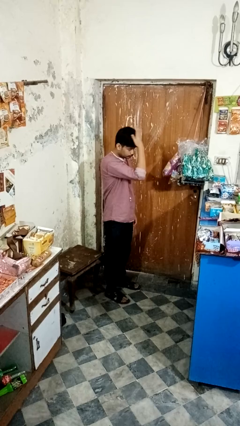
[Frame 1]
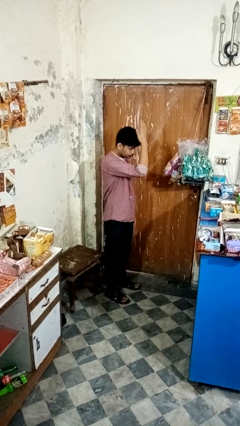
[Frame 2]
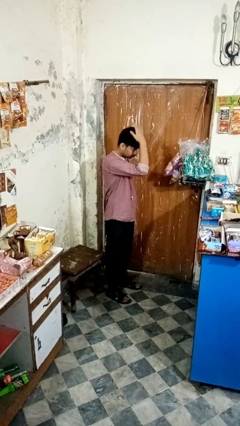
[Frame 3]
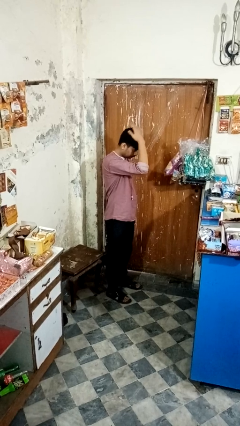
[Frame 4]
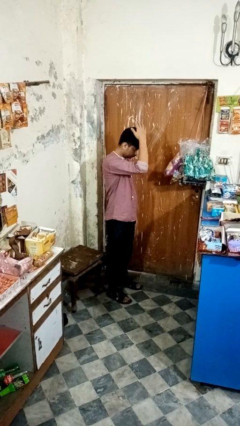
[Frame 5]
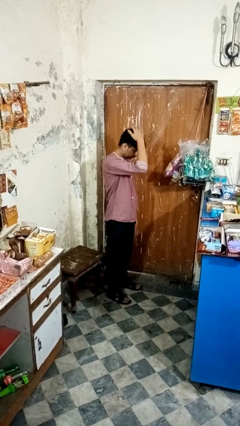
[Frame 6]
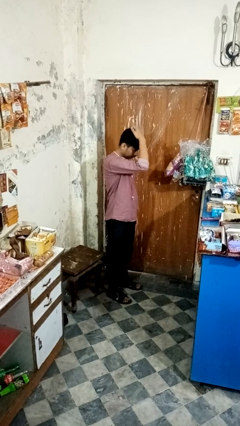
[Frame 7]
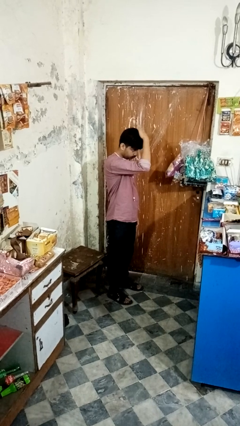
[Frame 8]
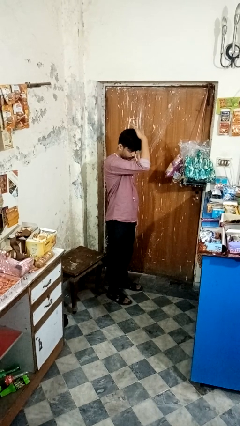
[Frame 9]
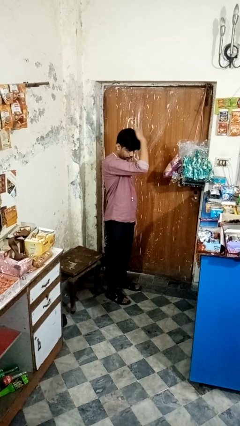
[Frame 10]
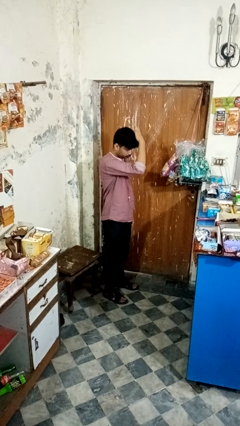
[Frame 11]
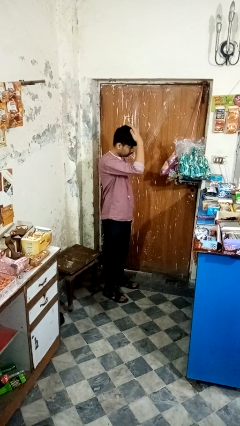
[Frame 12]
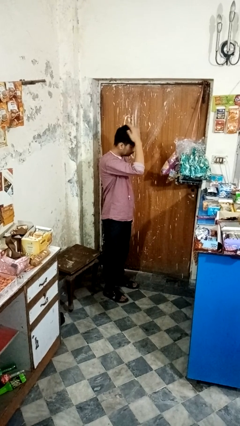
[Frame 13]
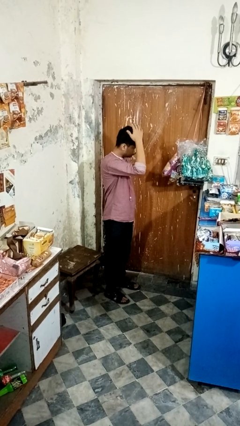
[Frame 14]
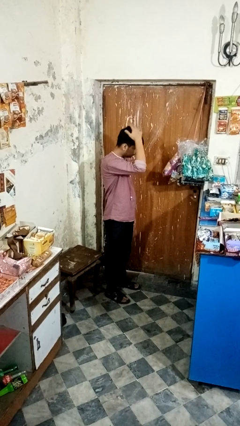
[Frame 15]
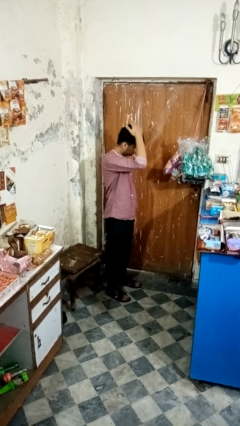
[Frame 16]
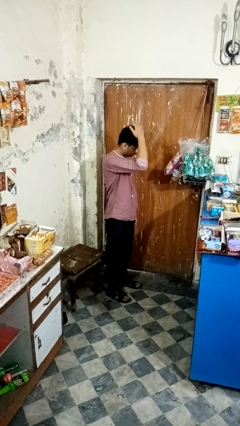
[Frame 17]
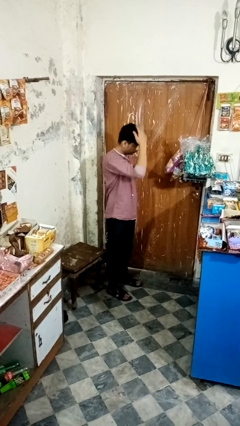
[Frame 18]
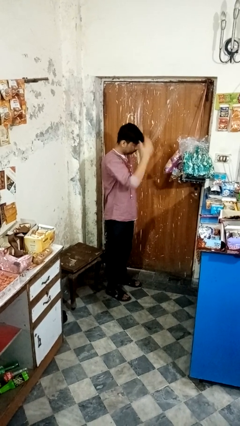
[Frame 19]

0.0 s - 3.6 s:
person pats head

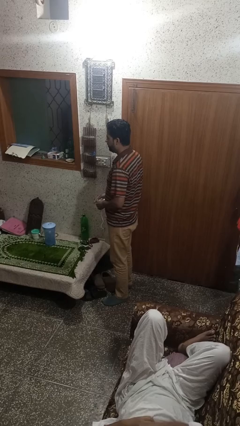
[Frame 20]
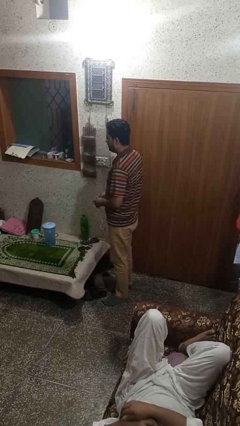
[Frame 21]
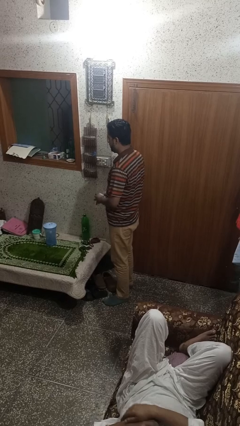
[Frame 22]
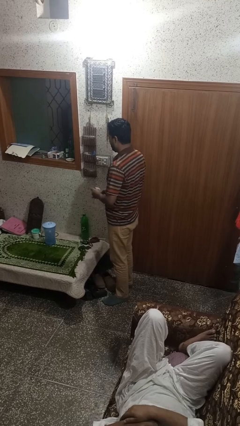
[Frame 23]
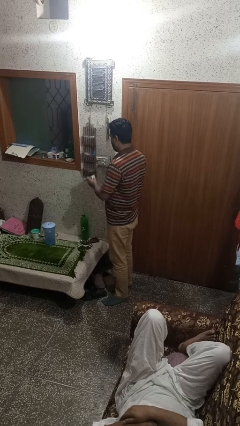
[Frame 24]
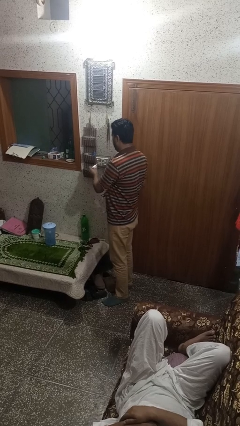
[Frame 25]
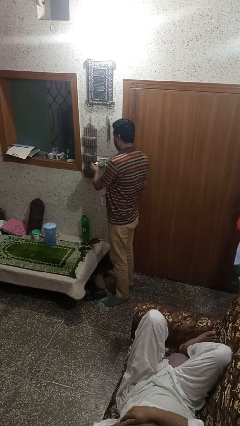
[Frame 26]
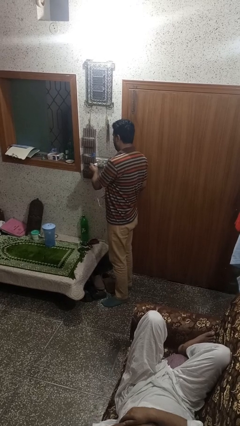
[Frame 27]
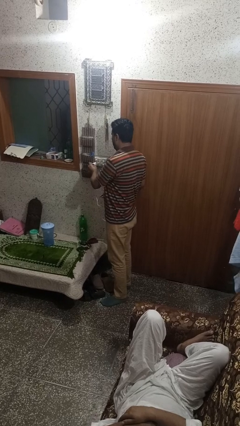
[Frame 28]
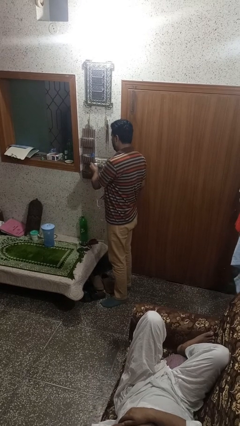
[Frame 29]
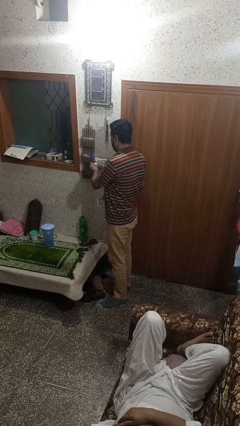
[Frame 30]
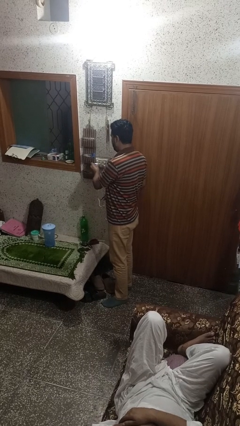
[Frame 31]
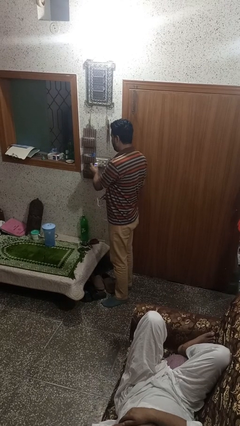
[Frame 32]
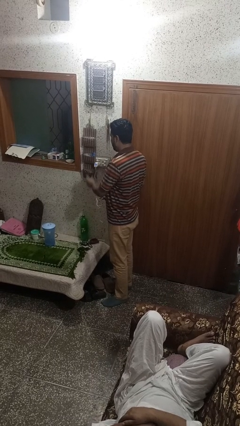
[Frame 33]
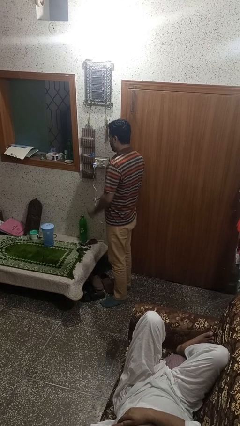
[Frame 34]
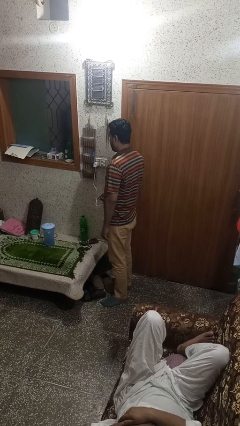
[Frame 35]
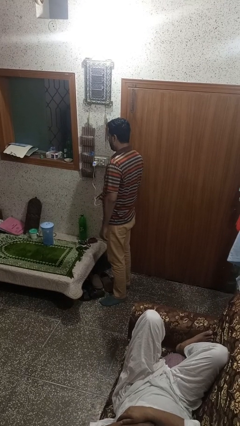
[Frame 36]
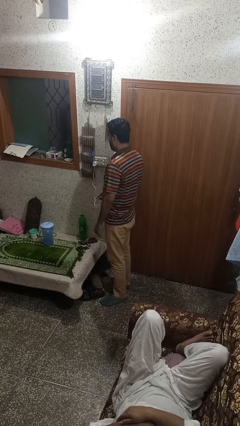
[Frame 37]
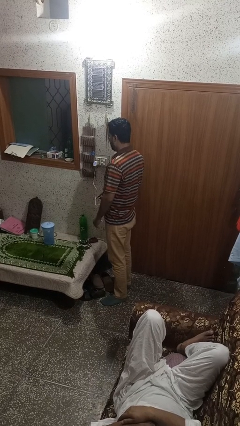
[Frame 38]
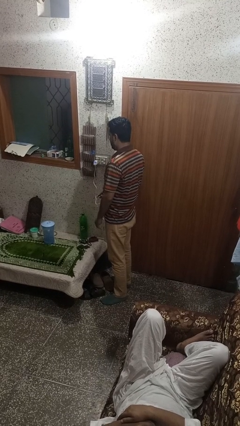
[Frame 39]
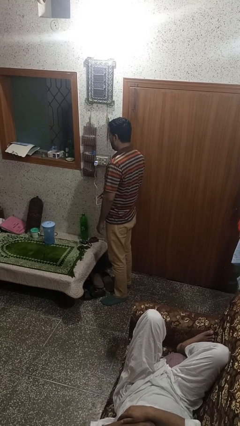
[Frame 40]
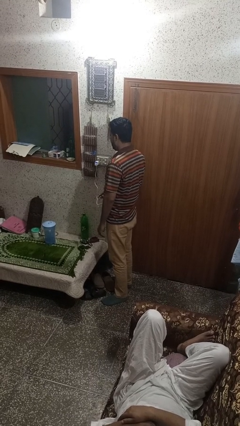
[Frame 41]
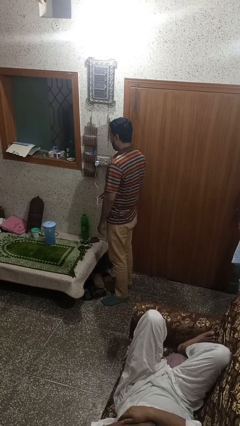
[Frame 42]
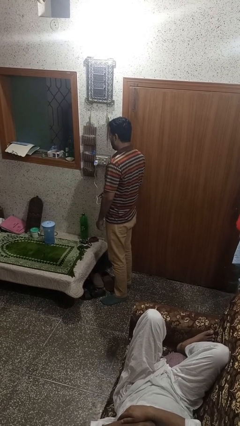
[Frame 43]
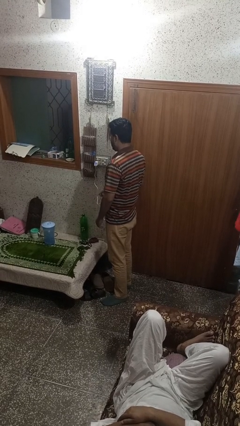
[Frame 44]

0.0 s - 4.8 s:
person plugs into electrical socket

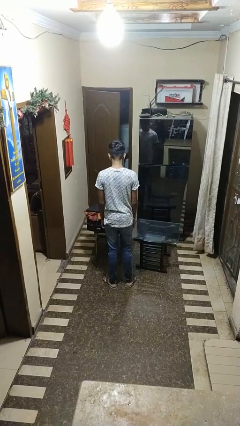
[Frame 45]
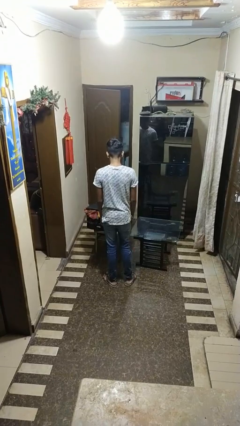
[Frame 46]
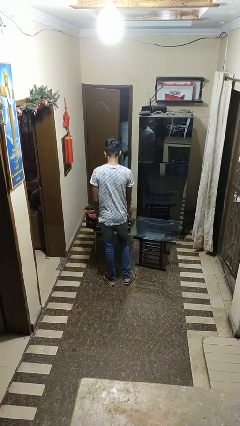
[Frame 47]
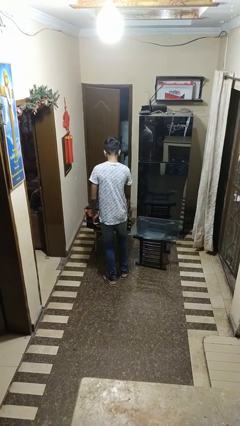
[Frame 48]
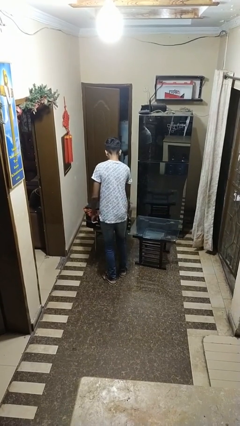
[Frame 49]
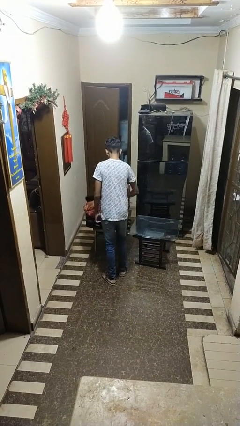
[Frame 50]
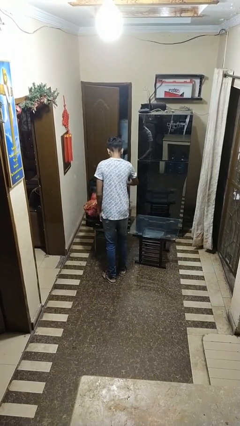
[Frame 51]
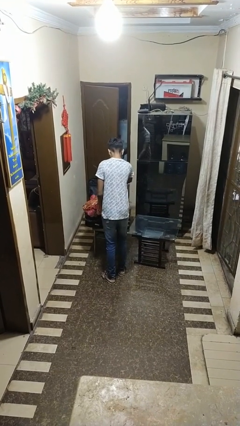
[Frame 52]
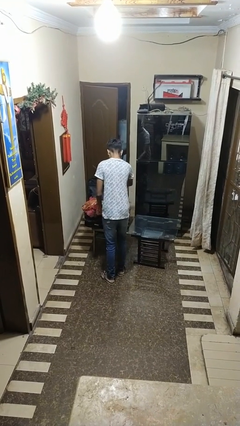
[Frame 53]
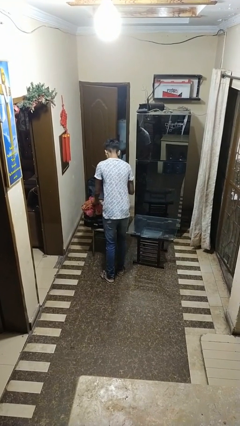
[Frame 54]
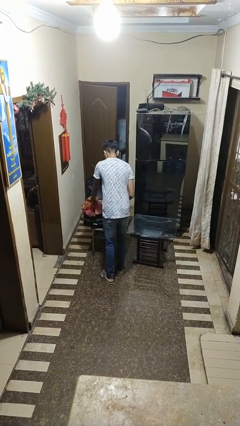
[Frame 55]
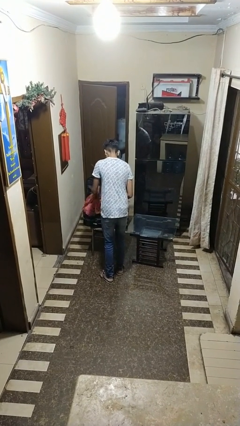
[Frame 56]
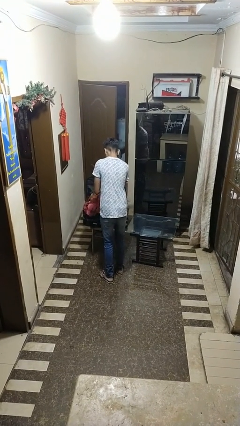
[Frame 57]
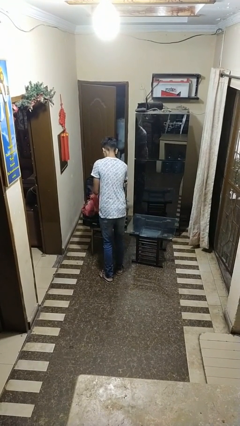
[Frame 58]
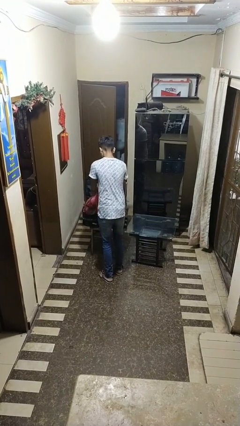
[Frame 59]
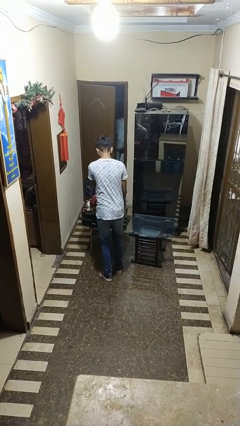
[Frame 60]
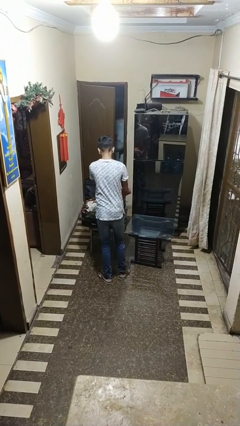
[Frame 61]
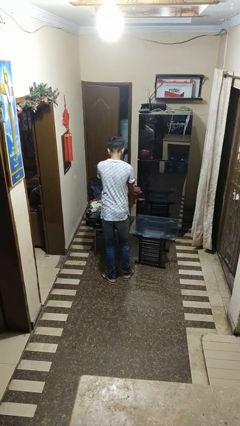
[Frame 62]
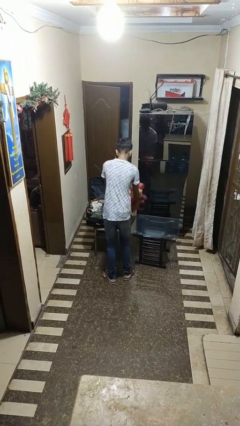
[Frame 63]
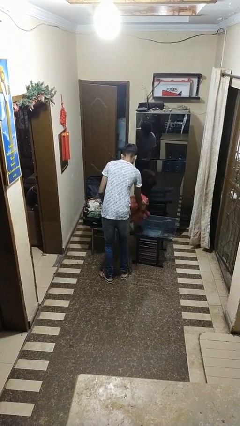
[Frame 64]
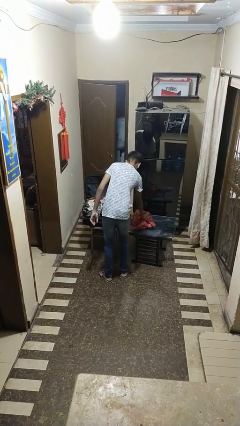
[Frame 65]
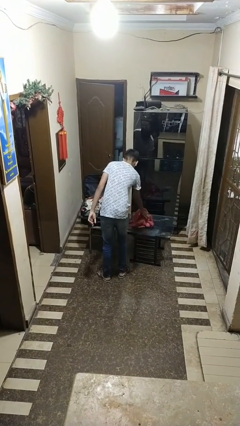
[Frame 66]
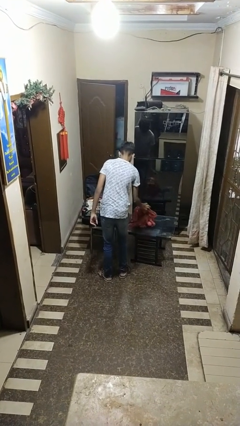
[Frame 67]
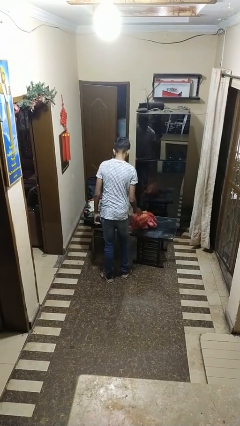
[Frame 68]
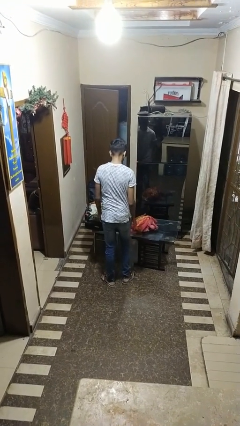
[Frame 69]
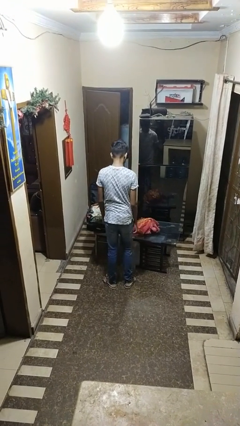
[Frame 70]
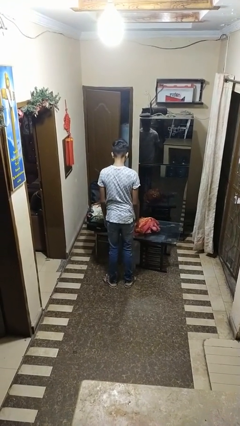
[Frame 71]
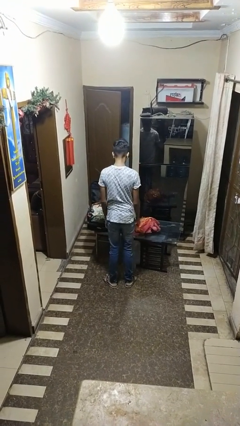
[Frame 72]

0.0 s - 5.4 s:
person unloads clothes from suitcase

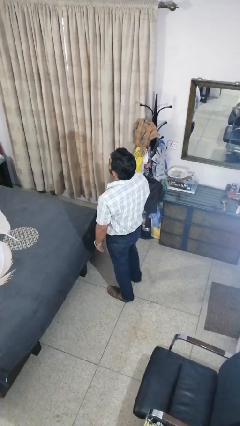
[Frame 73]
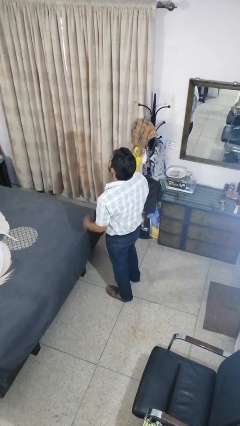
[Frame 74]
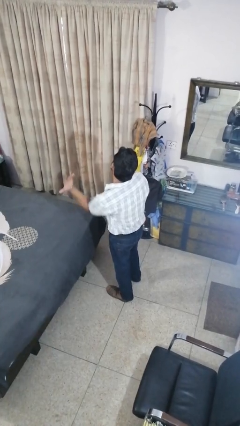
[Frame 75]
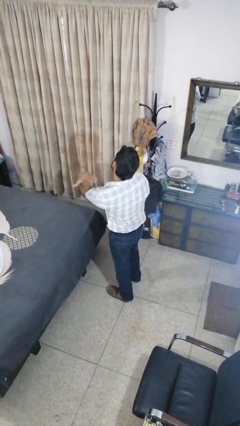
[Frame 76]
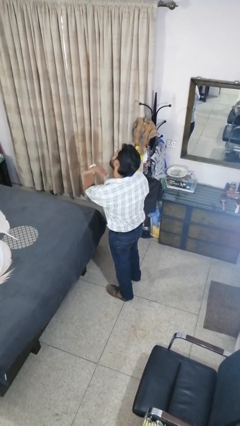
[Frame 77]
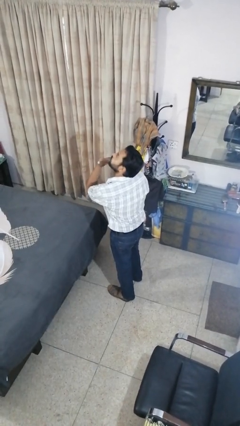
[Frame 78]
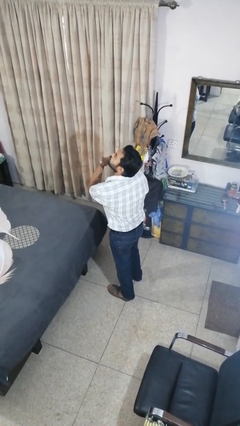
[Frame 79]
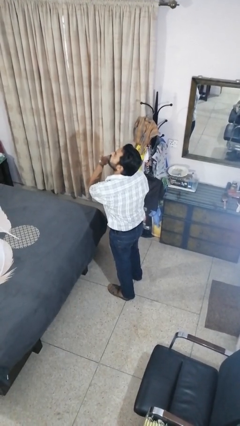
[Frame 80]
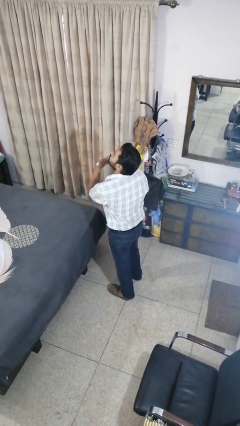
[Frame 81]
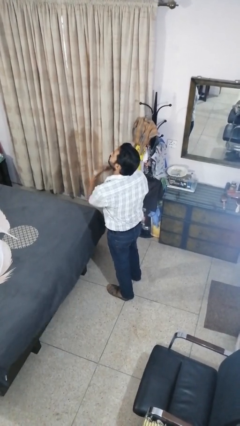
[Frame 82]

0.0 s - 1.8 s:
person gestures cut

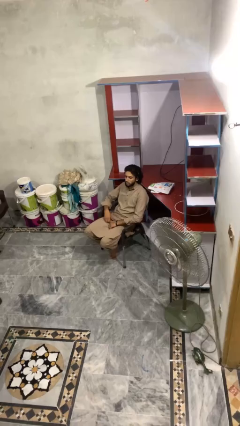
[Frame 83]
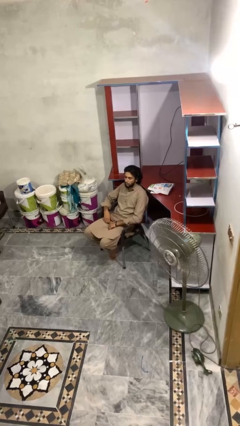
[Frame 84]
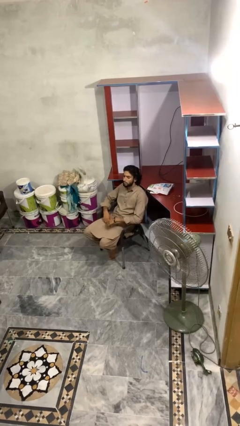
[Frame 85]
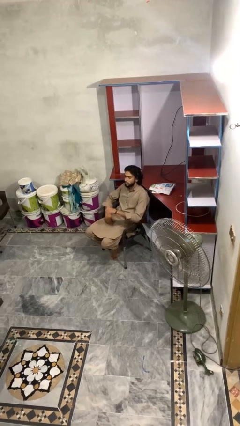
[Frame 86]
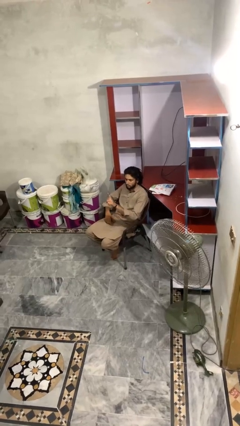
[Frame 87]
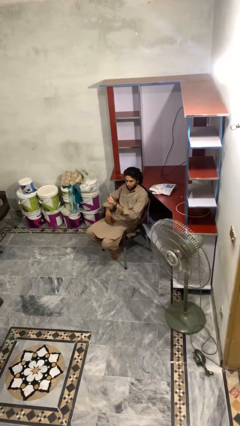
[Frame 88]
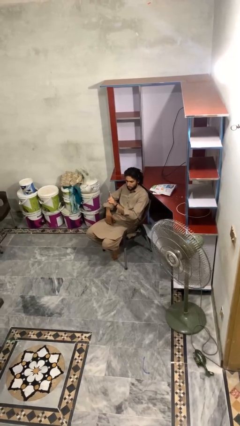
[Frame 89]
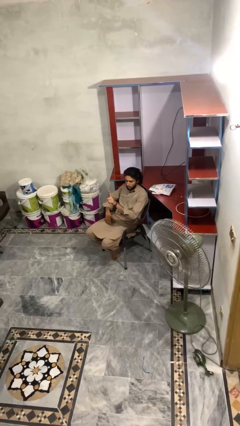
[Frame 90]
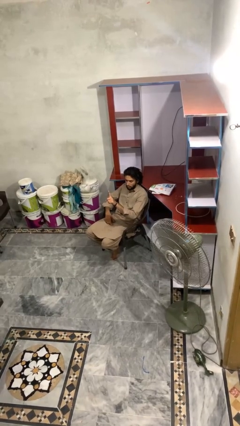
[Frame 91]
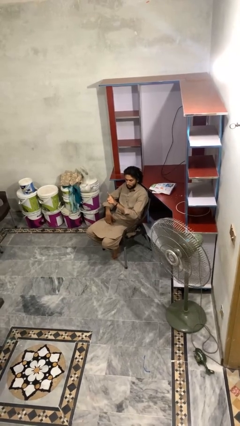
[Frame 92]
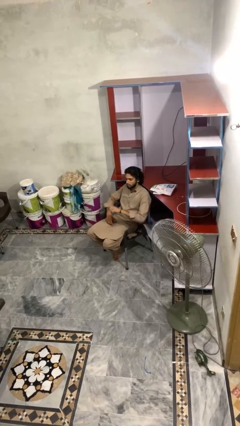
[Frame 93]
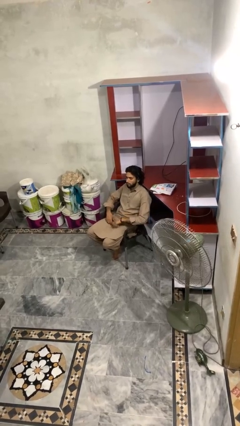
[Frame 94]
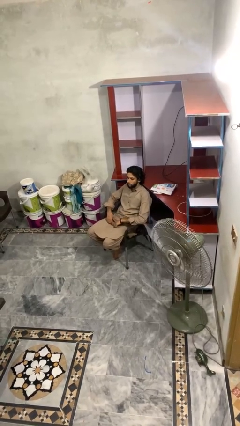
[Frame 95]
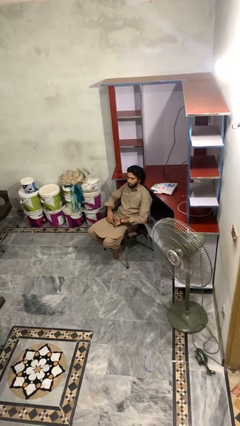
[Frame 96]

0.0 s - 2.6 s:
person gestures number one
